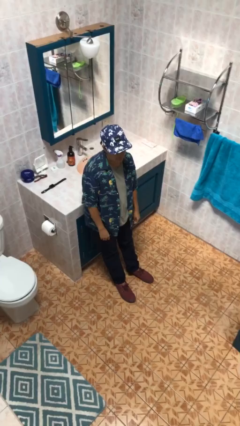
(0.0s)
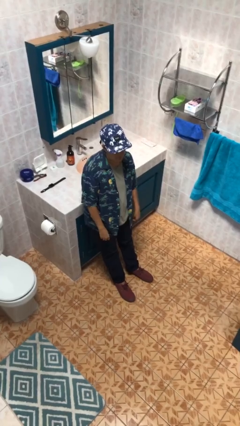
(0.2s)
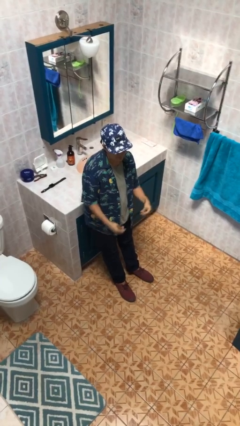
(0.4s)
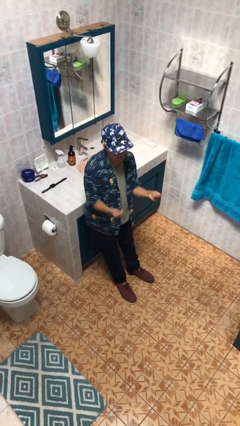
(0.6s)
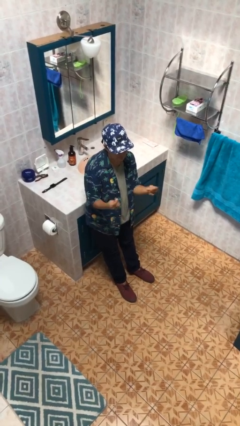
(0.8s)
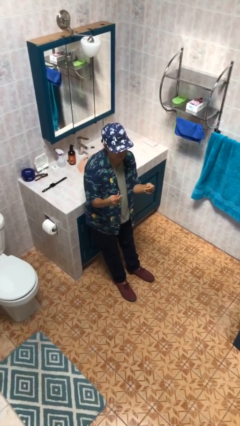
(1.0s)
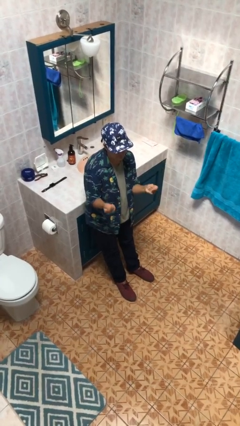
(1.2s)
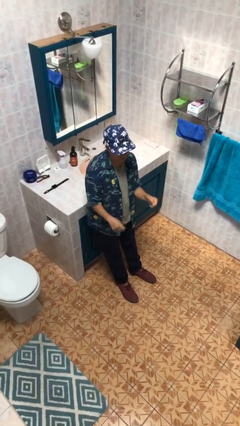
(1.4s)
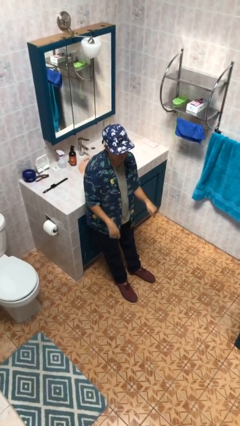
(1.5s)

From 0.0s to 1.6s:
person snaps fingers

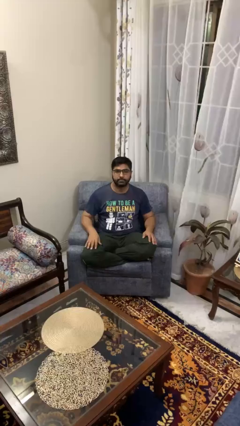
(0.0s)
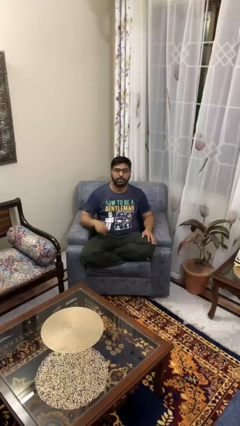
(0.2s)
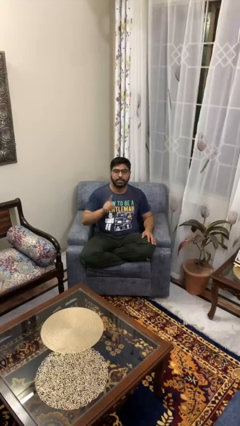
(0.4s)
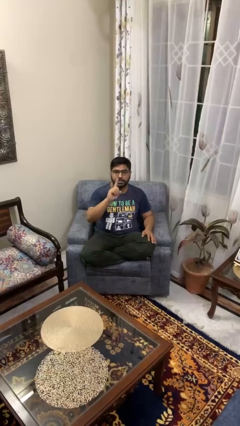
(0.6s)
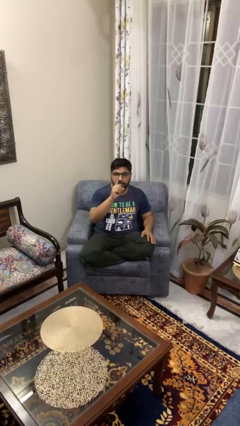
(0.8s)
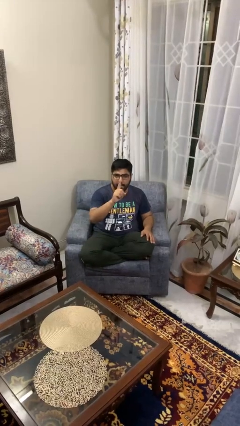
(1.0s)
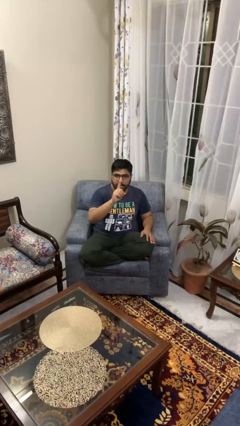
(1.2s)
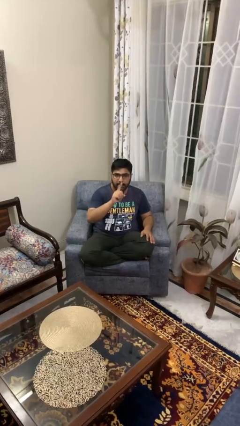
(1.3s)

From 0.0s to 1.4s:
person gestures number one

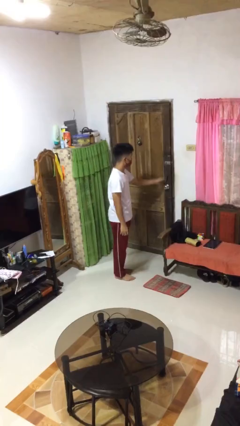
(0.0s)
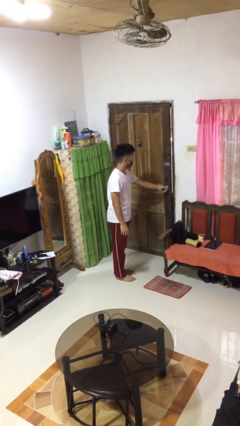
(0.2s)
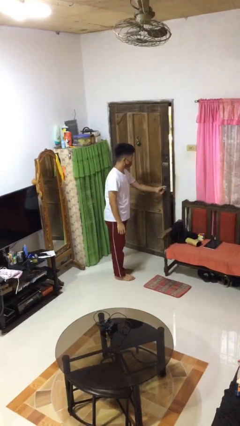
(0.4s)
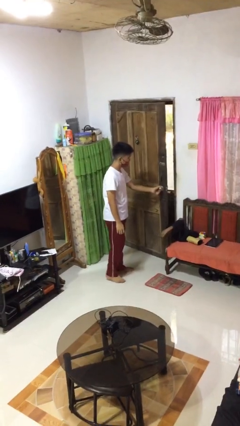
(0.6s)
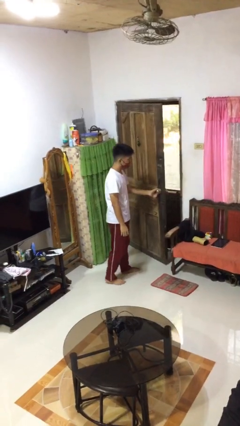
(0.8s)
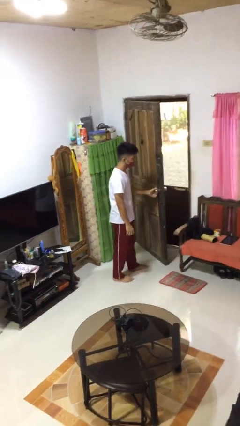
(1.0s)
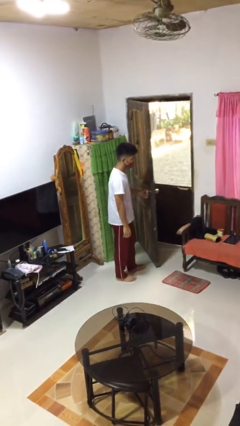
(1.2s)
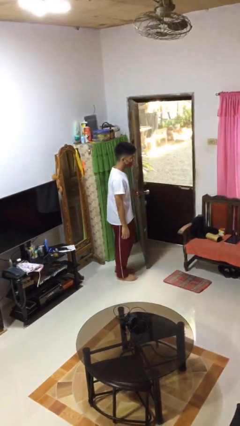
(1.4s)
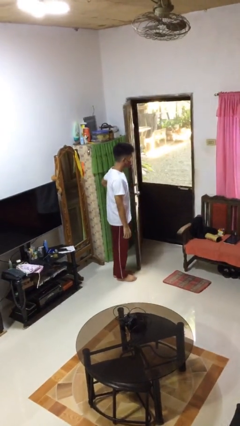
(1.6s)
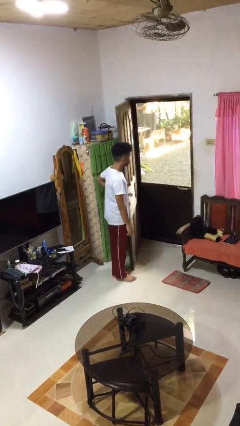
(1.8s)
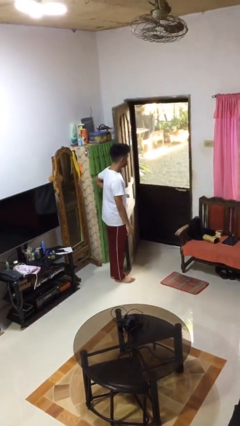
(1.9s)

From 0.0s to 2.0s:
person opens facility door

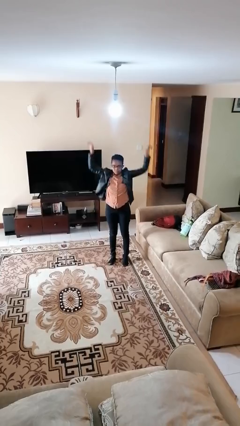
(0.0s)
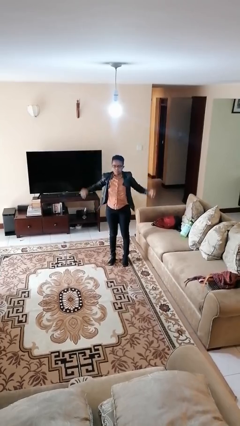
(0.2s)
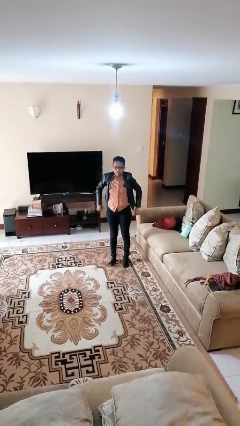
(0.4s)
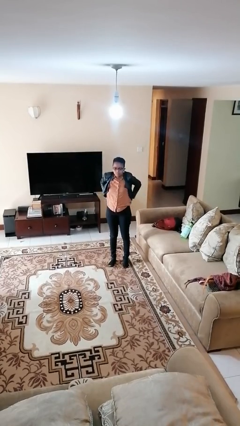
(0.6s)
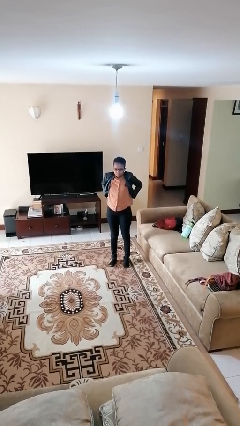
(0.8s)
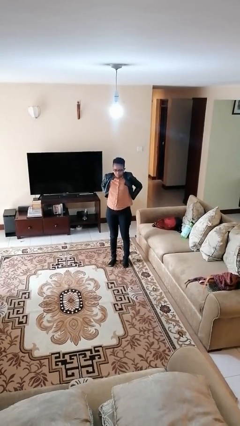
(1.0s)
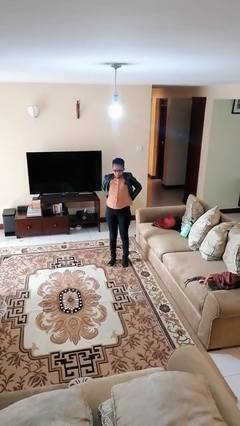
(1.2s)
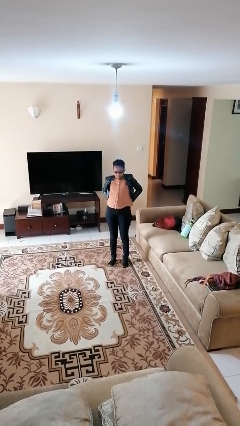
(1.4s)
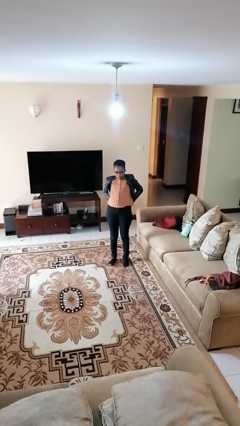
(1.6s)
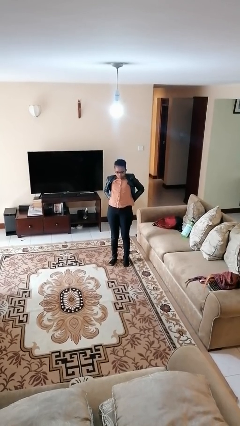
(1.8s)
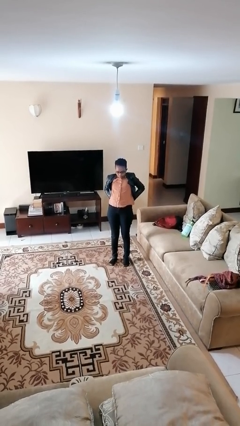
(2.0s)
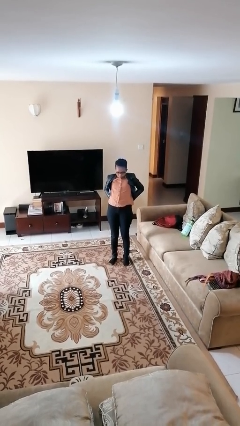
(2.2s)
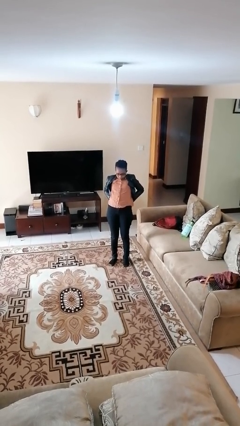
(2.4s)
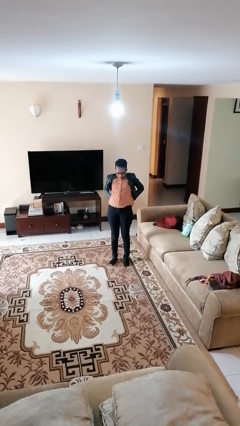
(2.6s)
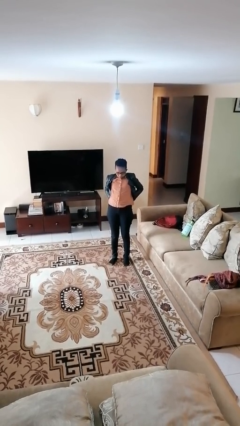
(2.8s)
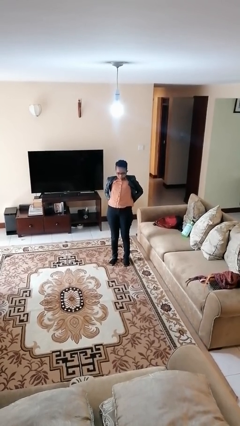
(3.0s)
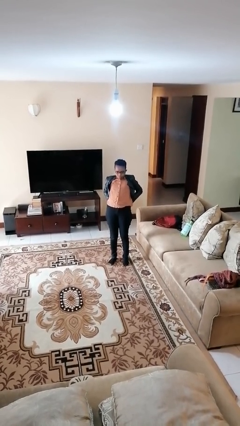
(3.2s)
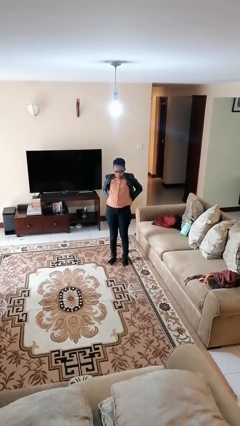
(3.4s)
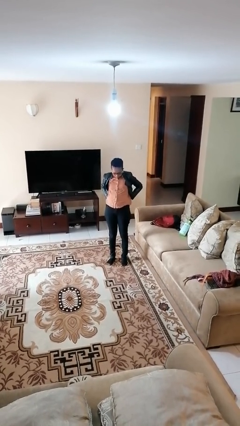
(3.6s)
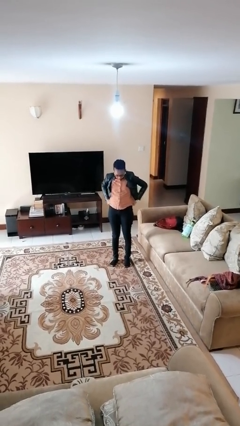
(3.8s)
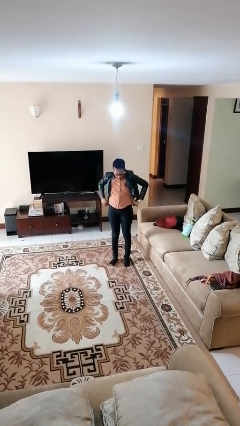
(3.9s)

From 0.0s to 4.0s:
person stretches back

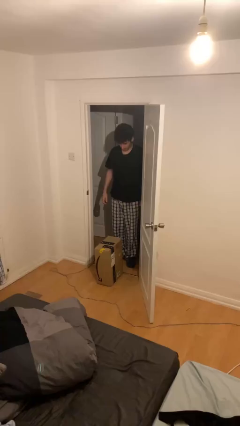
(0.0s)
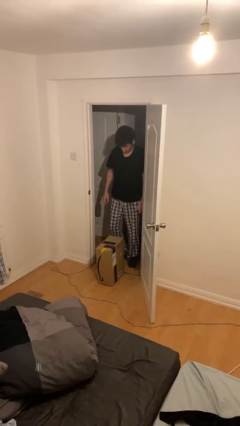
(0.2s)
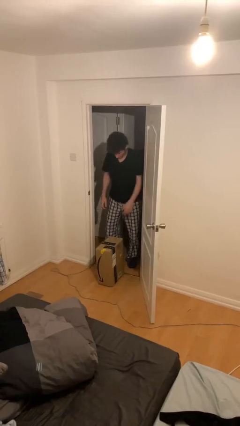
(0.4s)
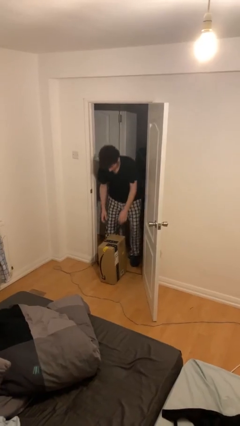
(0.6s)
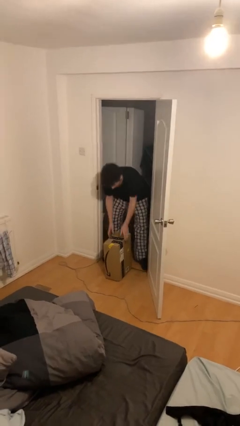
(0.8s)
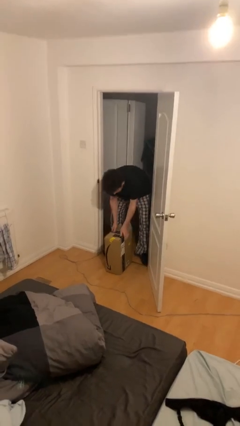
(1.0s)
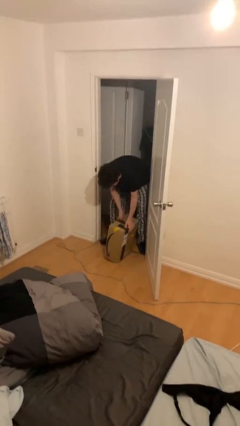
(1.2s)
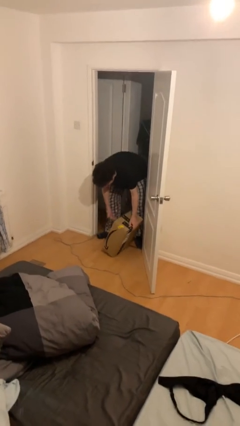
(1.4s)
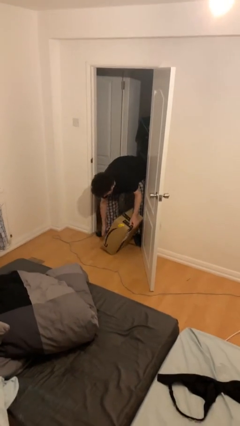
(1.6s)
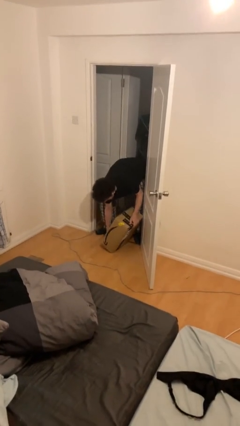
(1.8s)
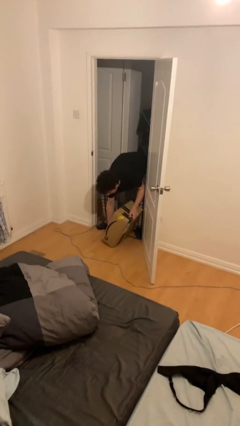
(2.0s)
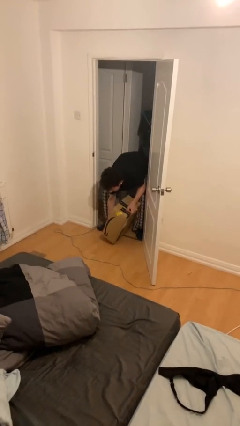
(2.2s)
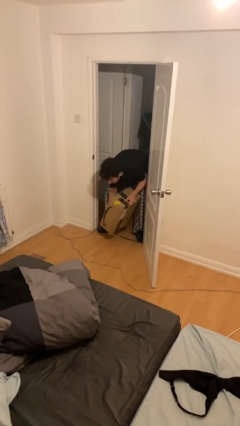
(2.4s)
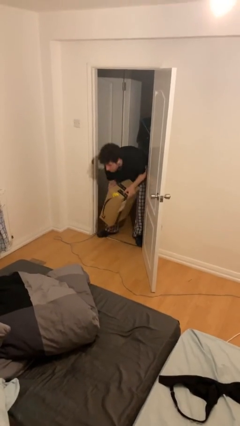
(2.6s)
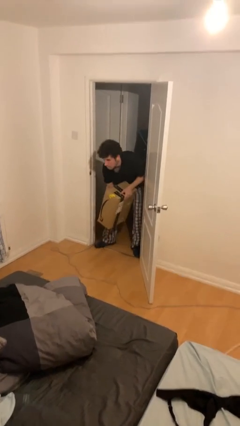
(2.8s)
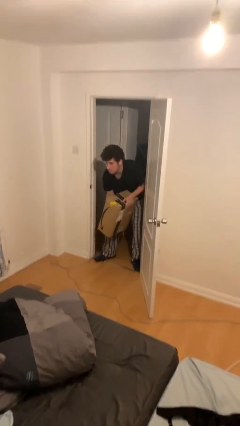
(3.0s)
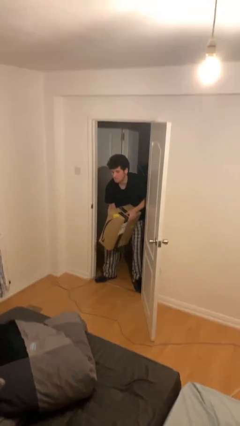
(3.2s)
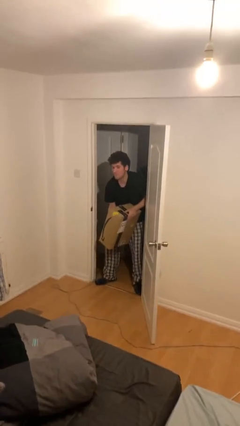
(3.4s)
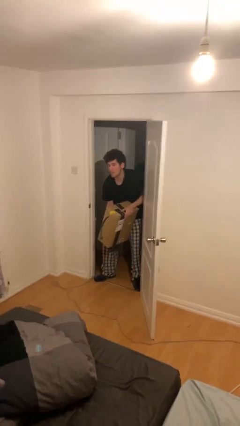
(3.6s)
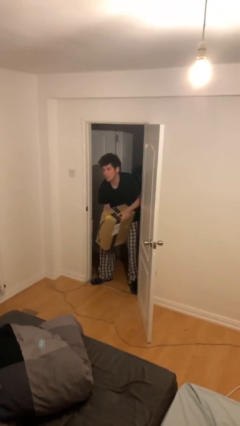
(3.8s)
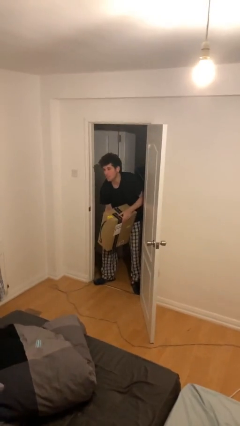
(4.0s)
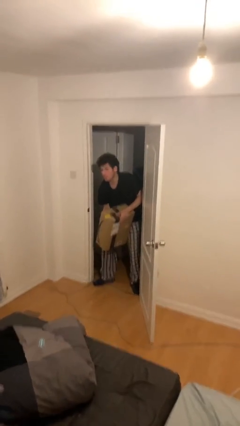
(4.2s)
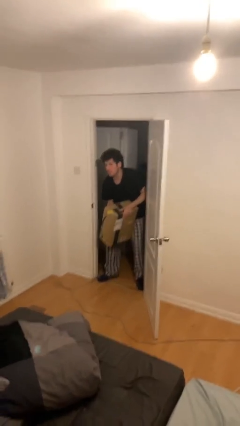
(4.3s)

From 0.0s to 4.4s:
person picks up object from floor

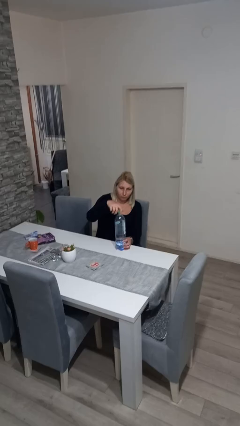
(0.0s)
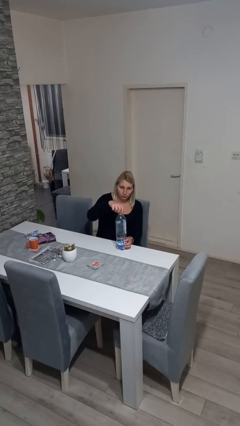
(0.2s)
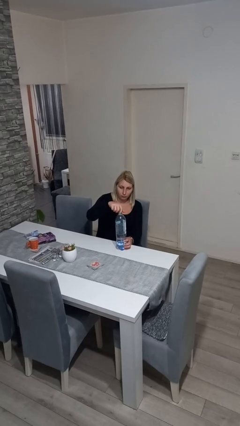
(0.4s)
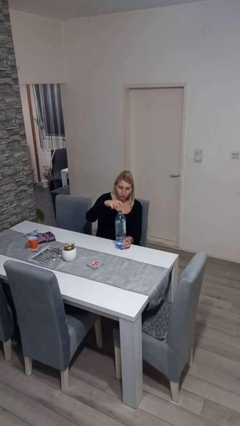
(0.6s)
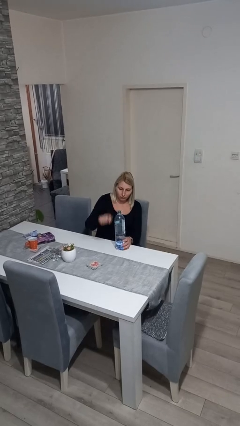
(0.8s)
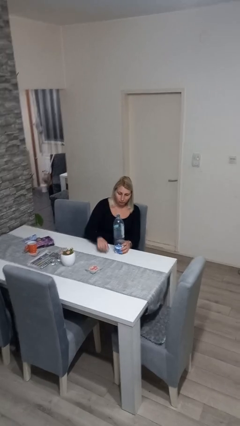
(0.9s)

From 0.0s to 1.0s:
person unscrews lid from bottle

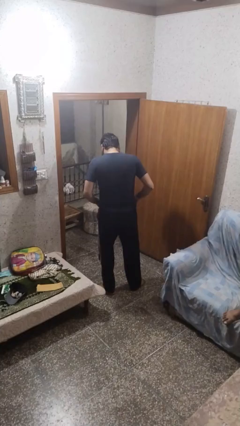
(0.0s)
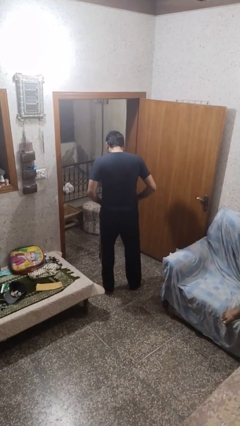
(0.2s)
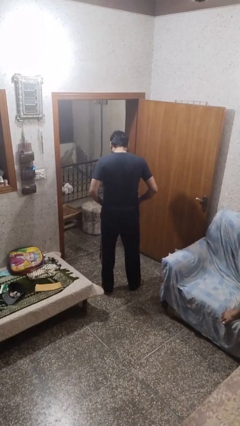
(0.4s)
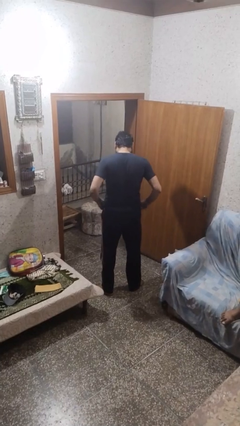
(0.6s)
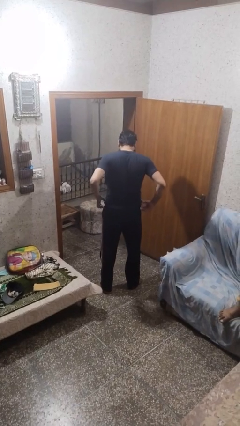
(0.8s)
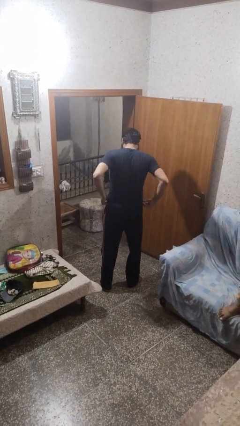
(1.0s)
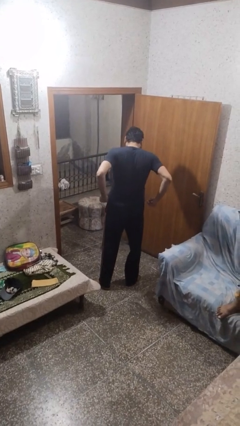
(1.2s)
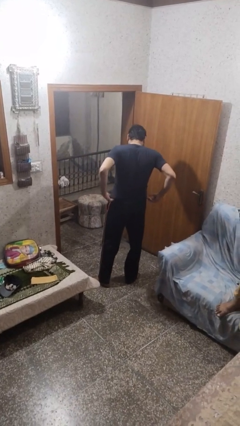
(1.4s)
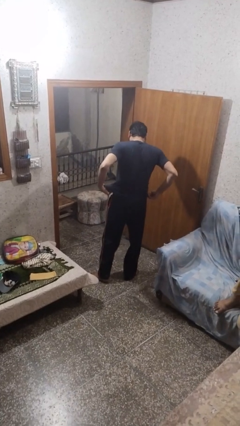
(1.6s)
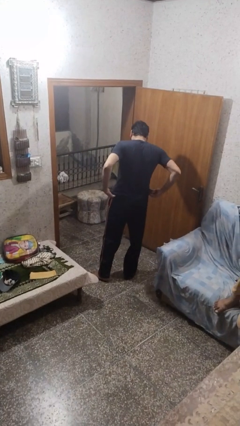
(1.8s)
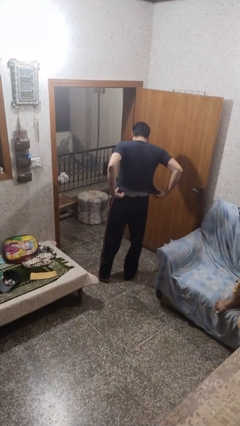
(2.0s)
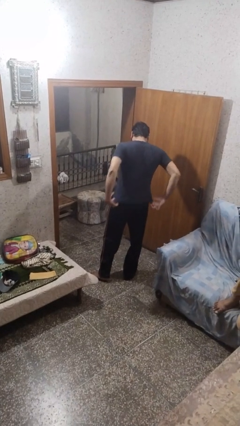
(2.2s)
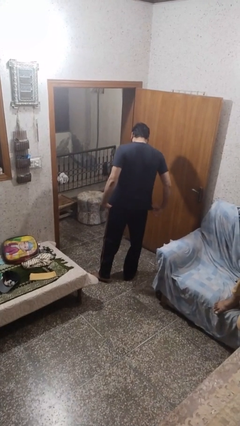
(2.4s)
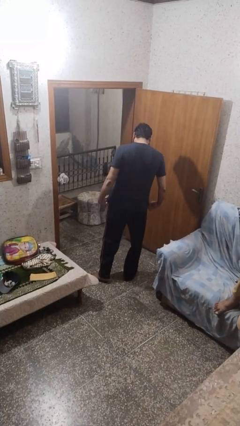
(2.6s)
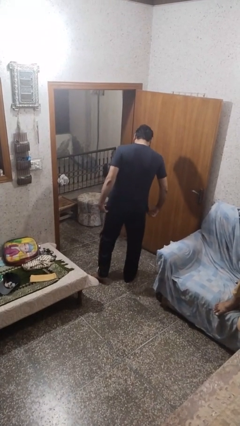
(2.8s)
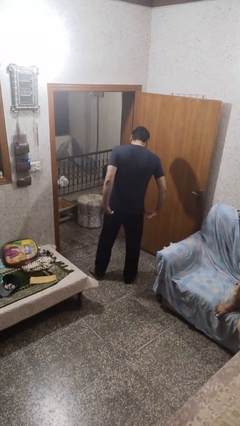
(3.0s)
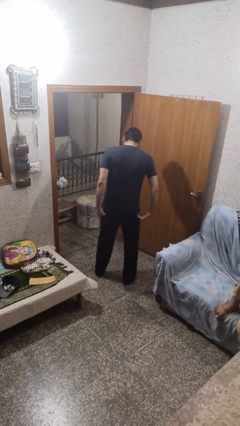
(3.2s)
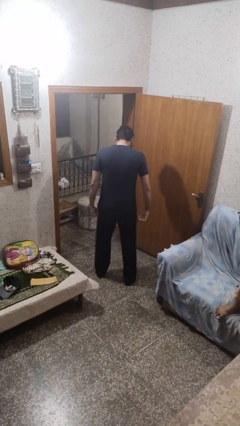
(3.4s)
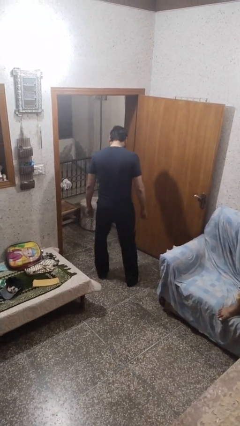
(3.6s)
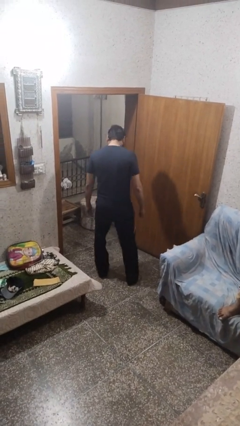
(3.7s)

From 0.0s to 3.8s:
person untucks shirt
